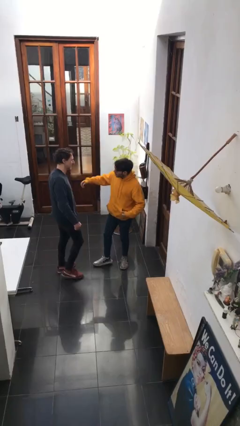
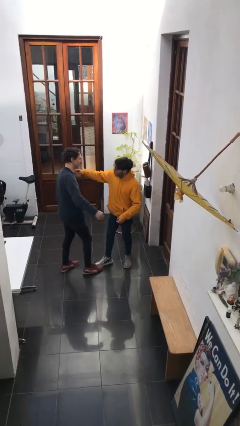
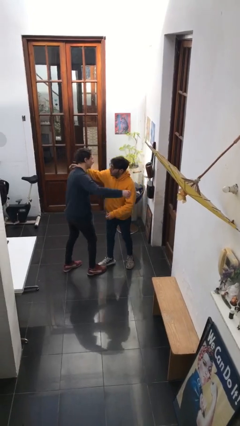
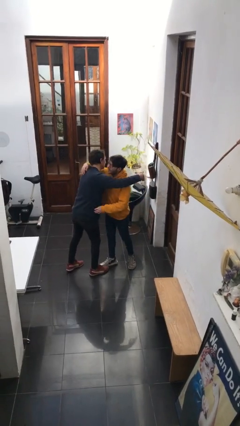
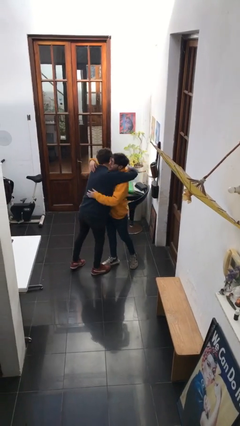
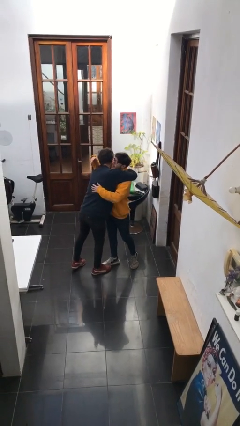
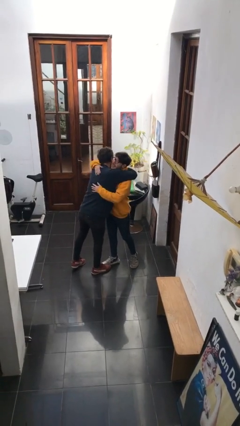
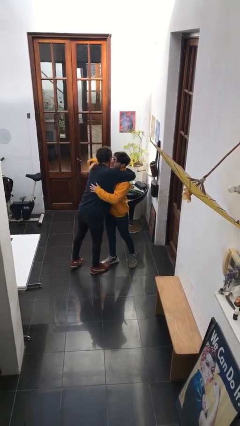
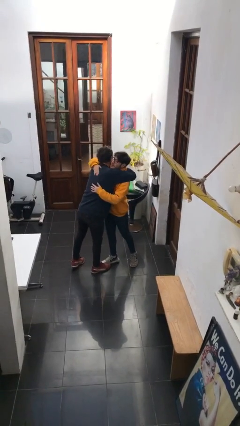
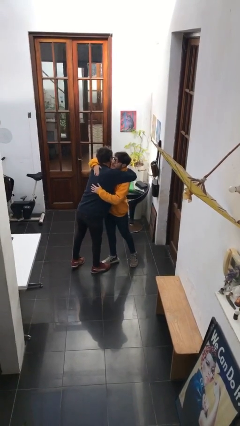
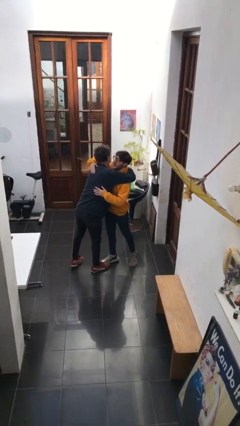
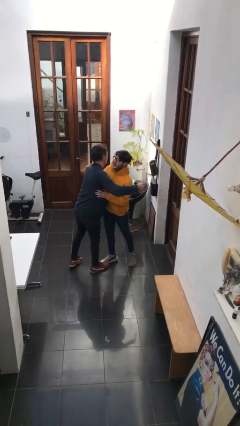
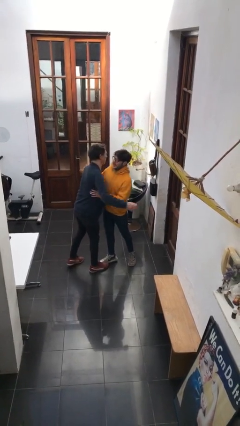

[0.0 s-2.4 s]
person embraces person

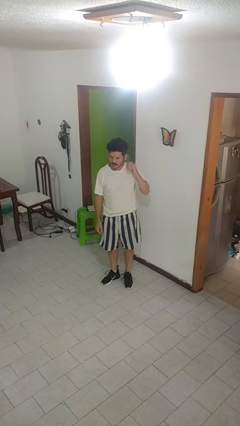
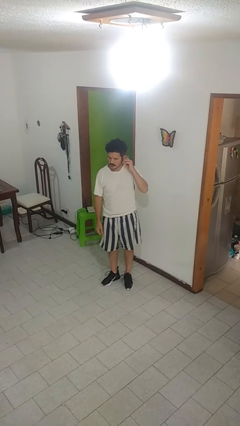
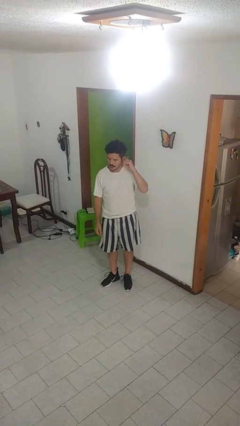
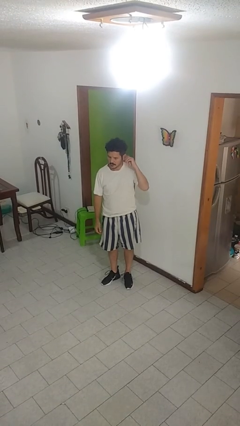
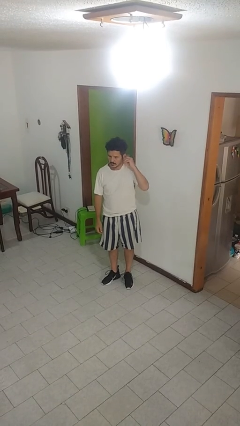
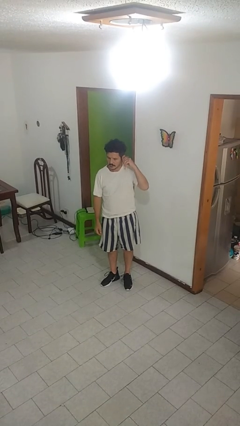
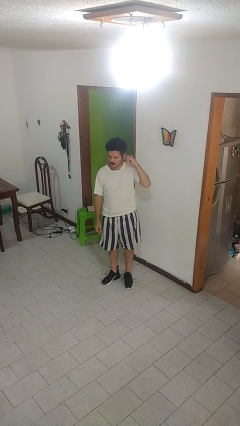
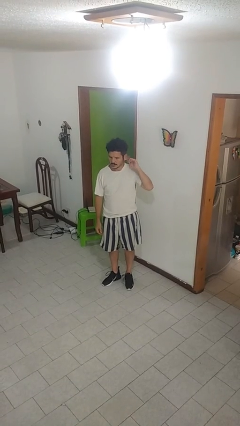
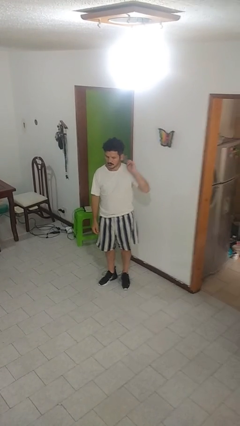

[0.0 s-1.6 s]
person touches earlobe

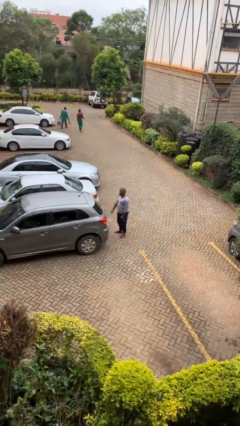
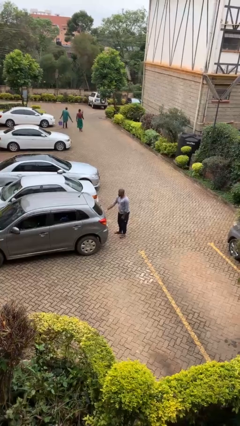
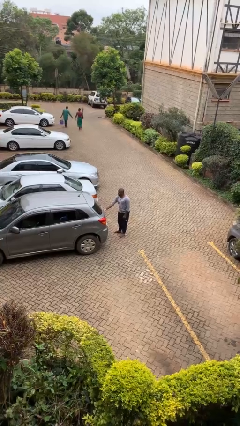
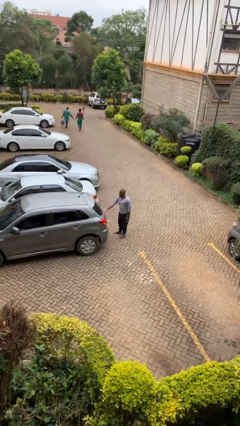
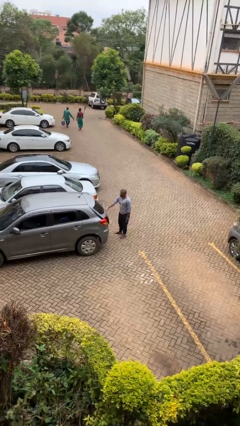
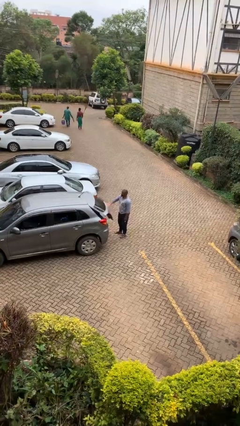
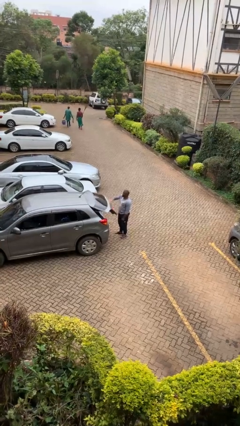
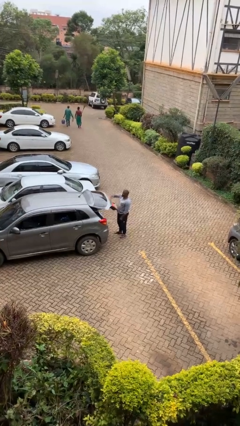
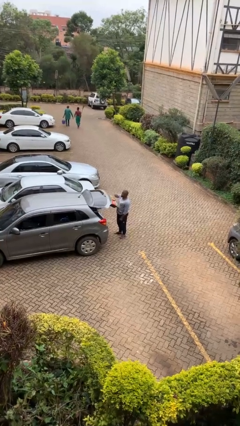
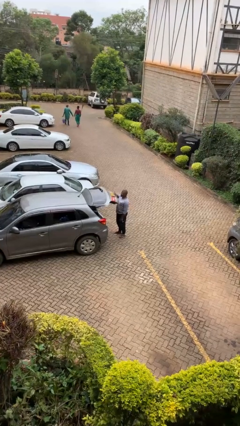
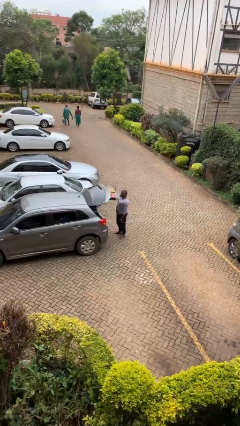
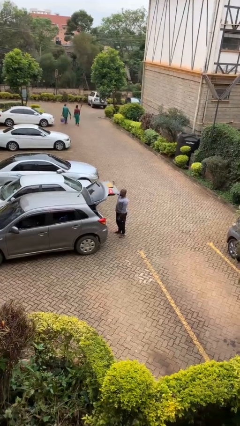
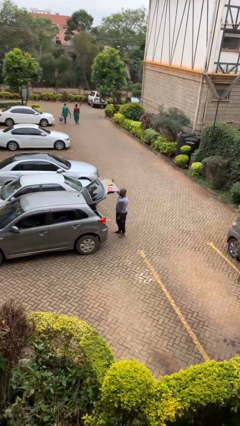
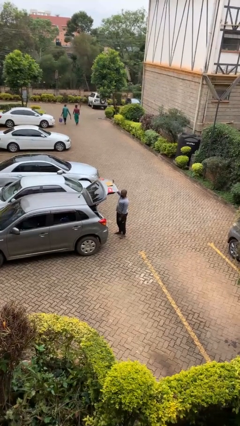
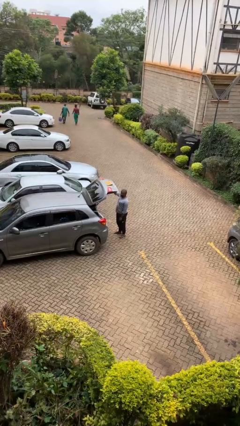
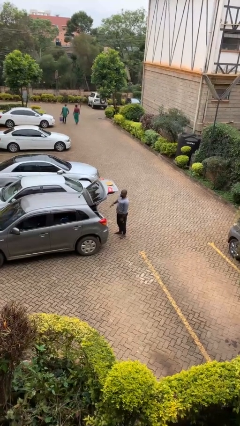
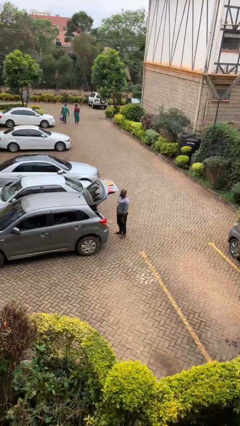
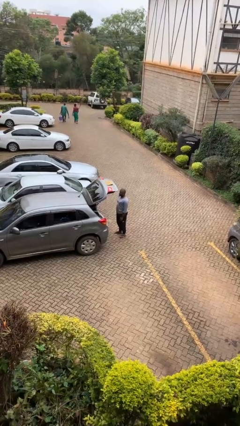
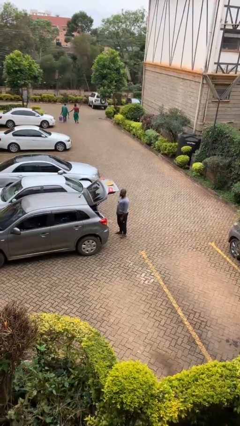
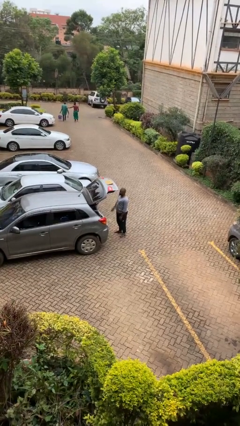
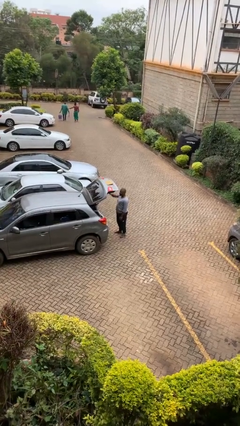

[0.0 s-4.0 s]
person opens car trunk

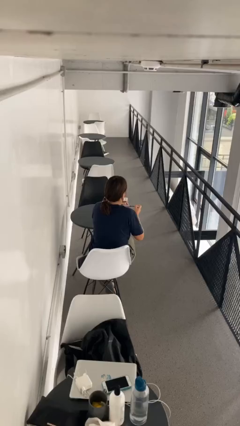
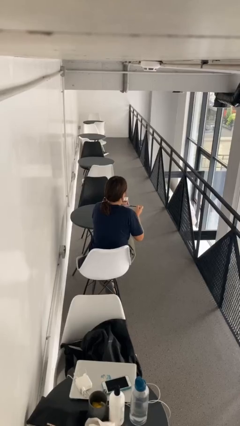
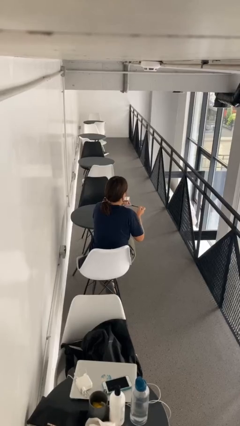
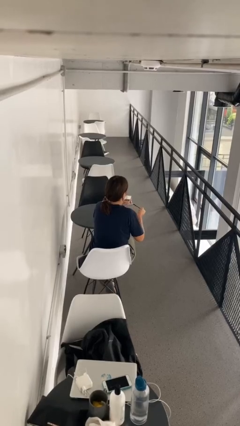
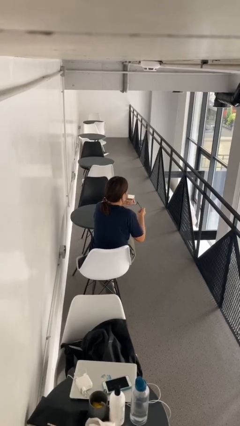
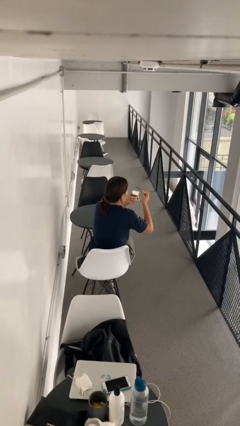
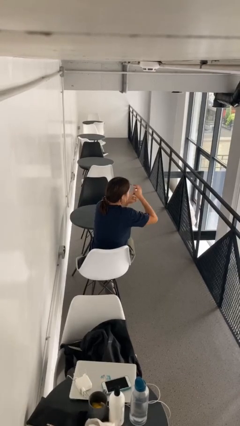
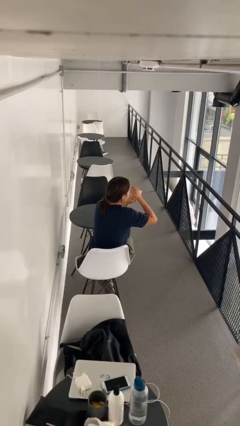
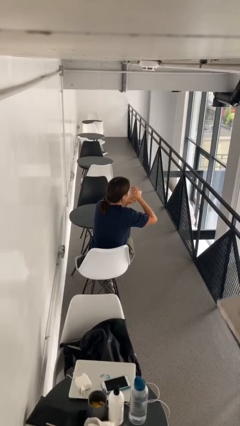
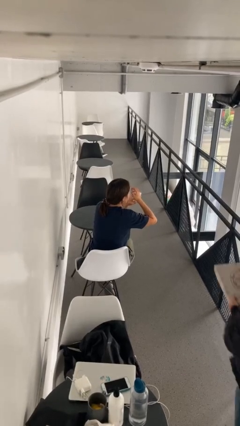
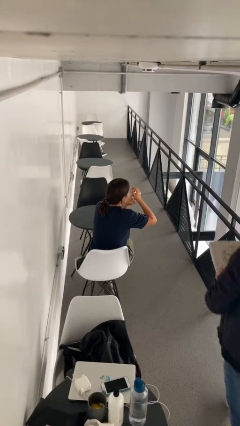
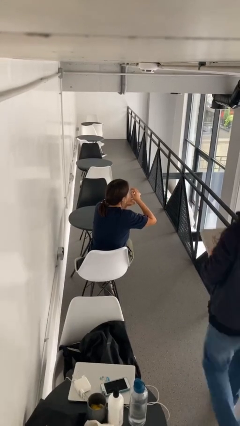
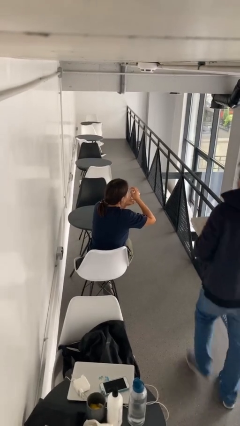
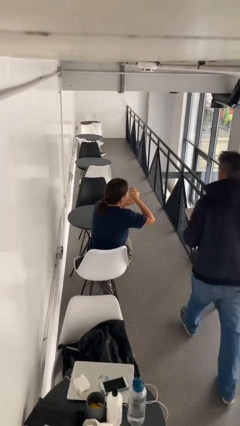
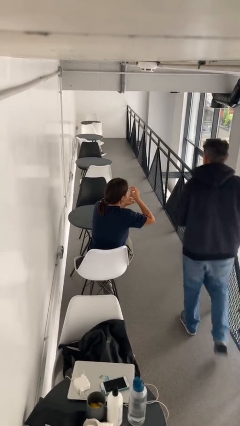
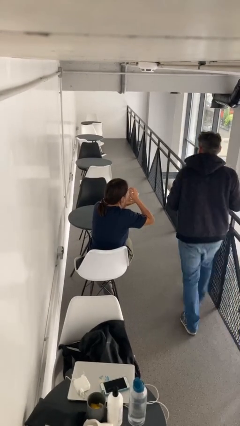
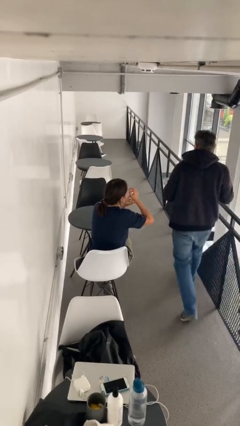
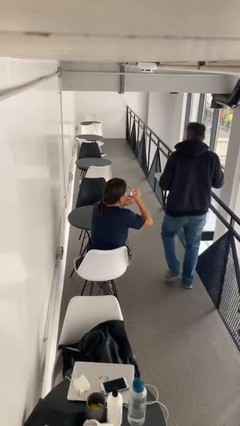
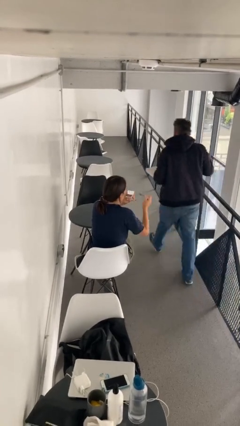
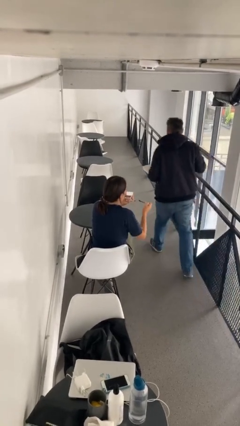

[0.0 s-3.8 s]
person applies eye makeup

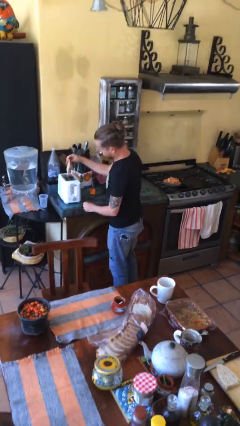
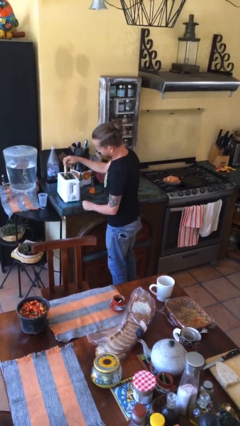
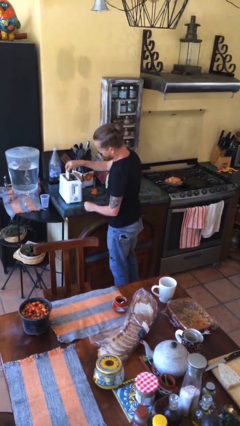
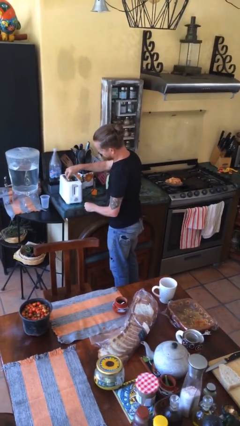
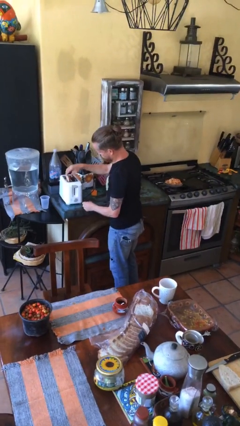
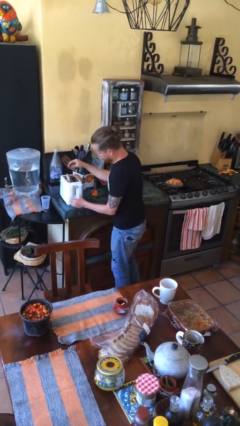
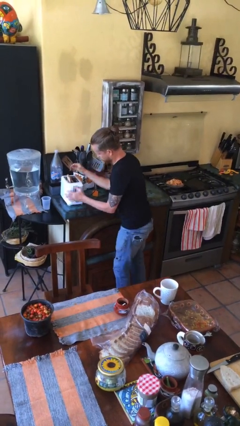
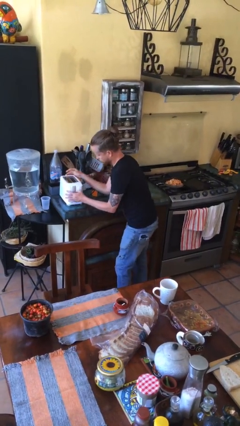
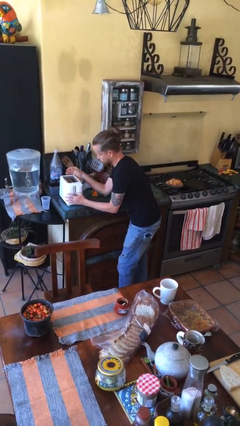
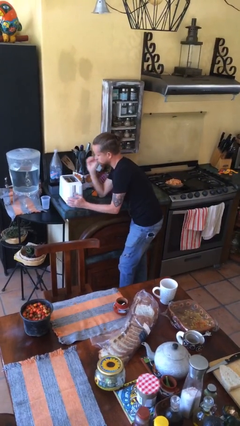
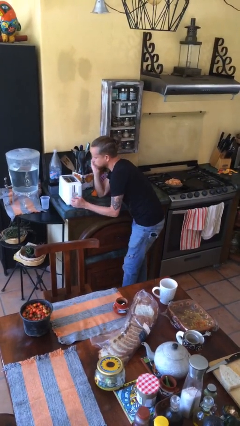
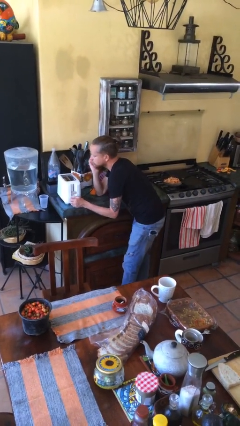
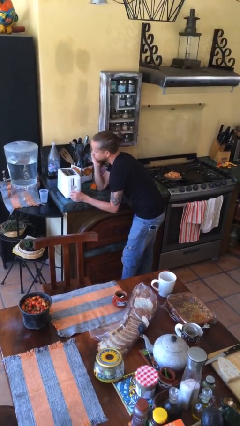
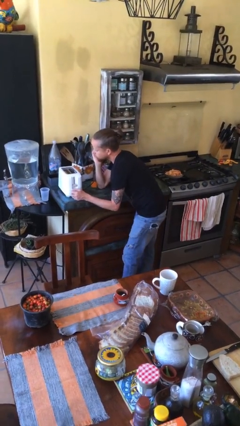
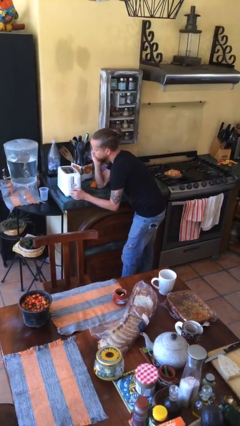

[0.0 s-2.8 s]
person puts object into toaster

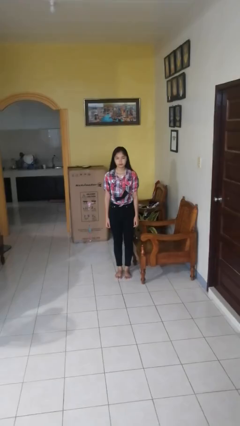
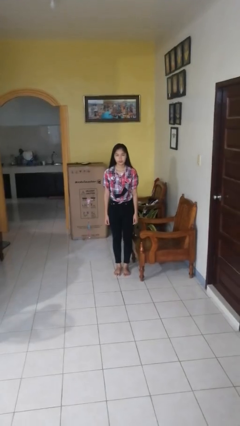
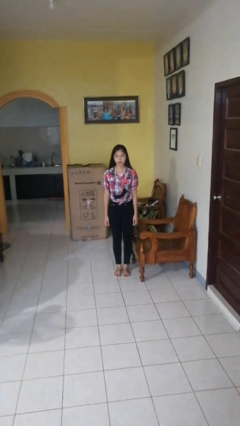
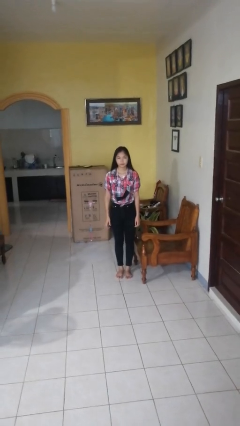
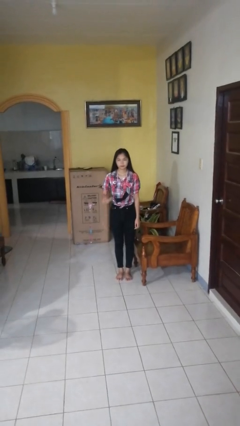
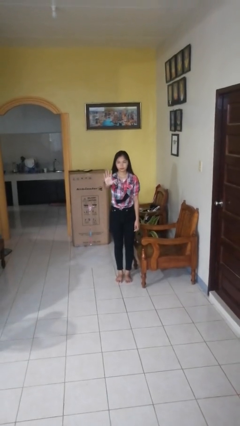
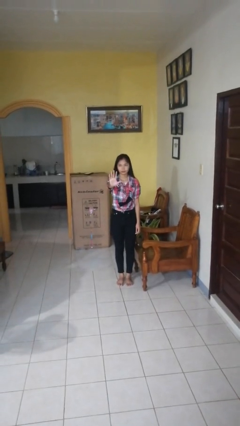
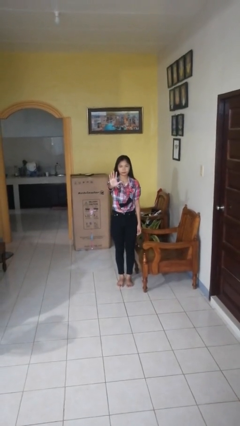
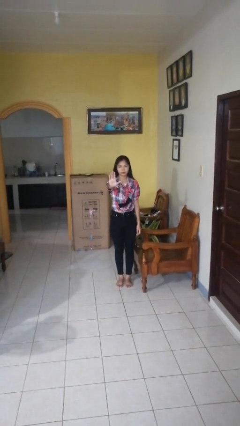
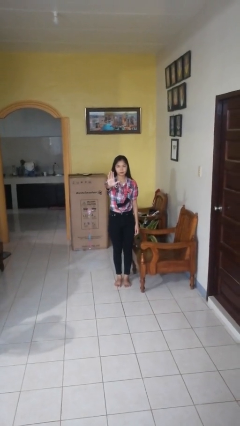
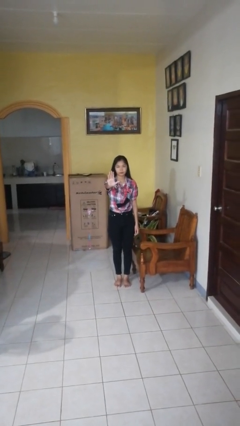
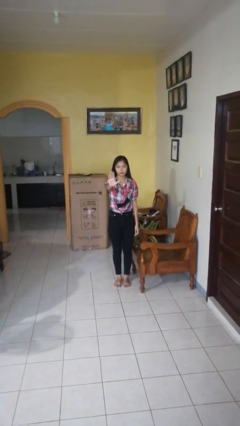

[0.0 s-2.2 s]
person gestures stop

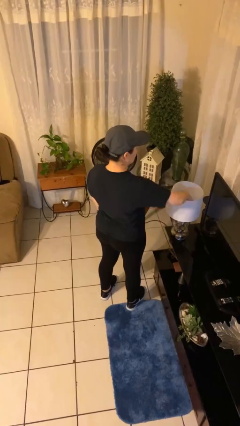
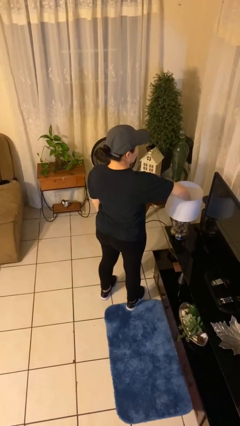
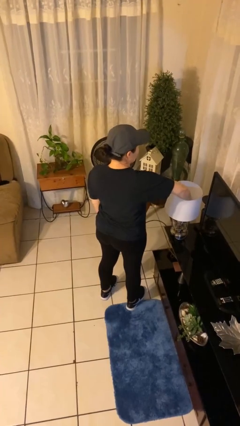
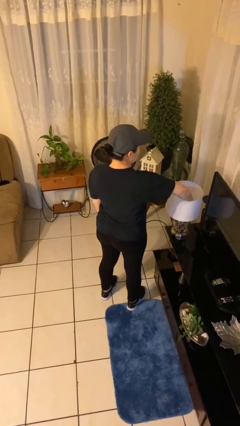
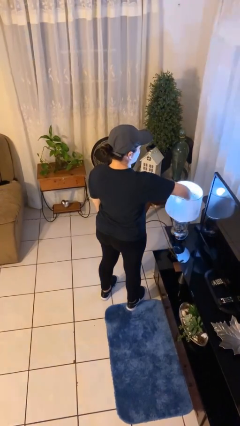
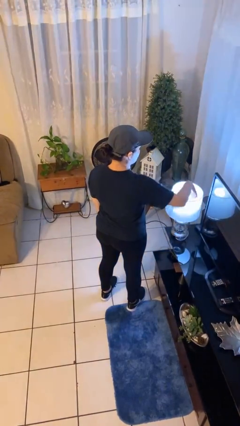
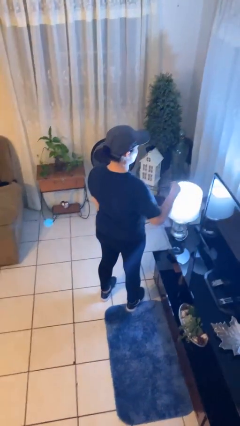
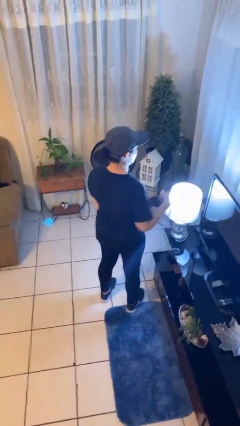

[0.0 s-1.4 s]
person turns on lamp
